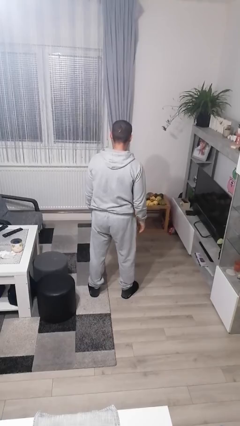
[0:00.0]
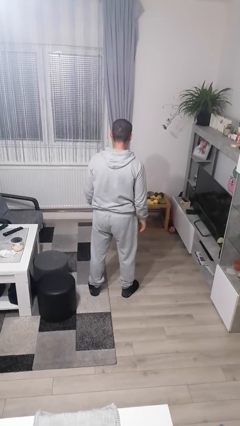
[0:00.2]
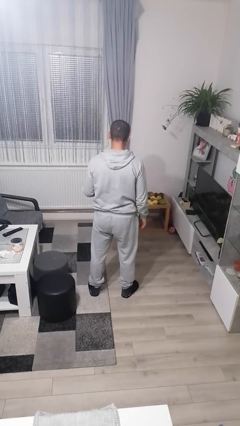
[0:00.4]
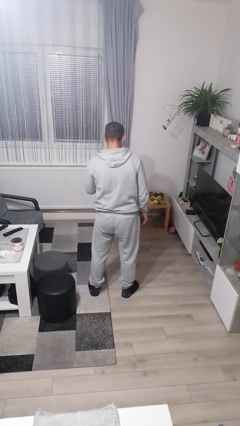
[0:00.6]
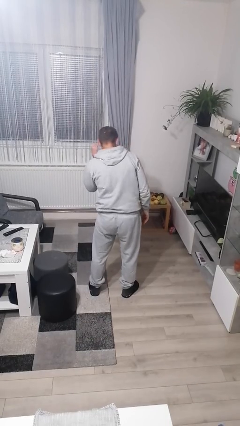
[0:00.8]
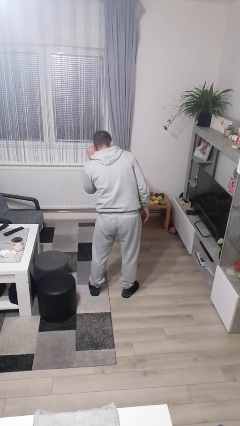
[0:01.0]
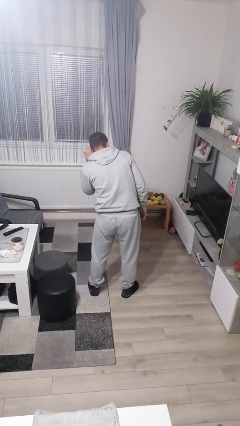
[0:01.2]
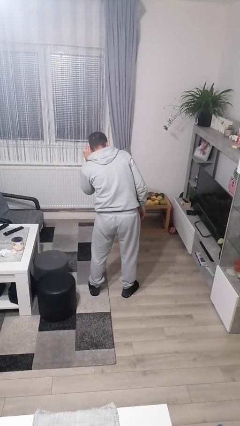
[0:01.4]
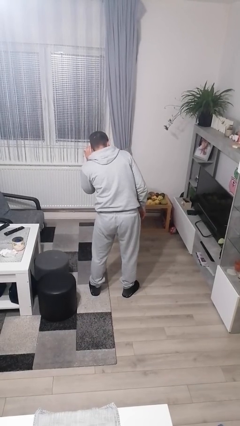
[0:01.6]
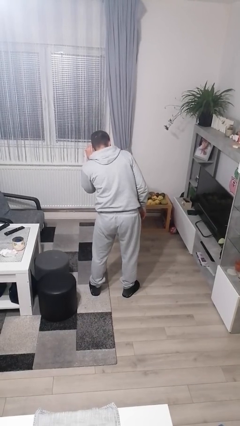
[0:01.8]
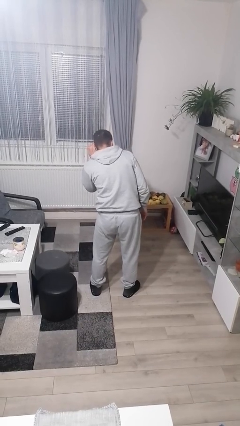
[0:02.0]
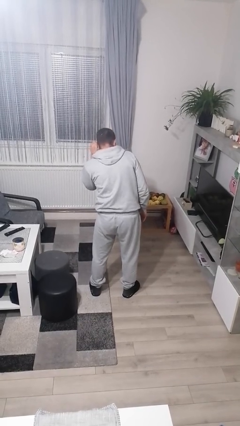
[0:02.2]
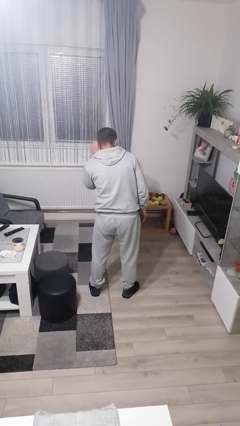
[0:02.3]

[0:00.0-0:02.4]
person gestures listen closely

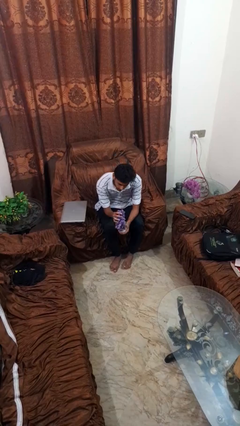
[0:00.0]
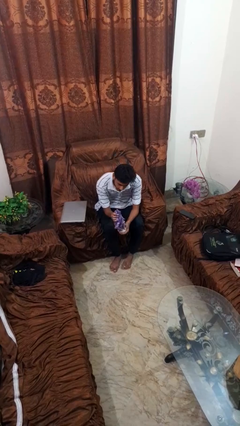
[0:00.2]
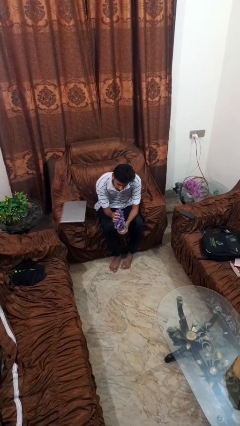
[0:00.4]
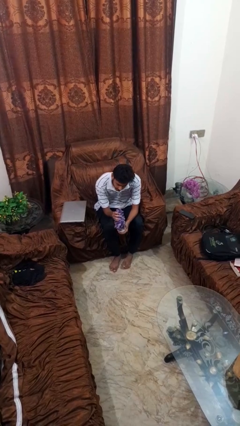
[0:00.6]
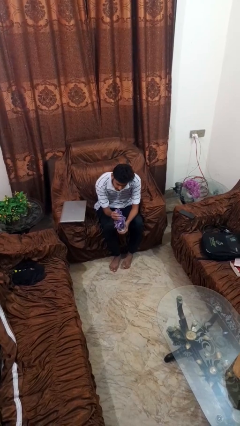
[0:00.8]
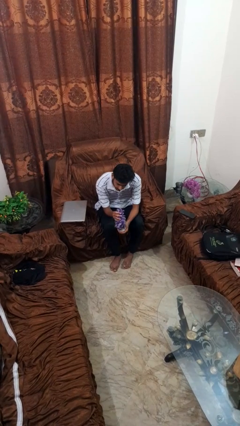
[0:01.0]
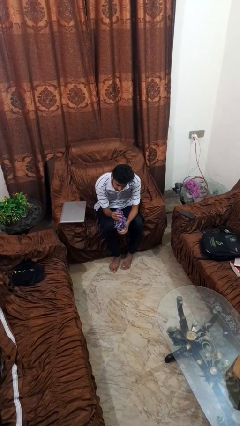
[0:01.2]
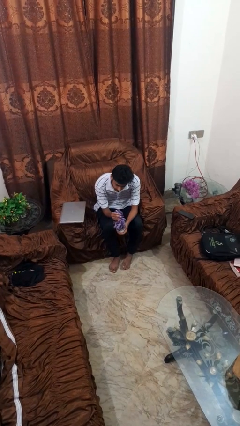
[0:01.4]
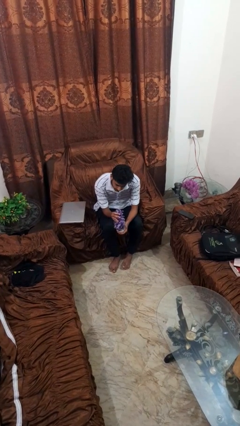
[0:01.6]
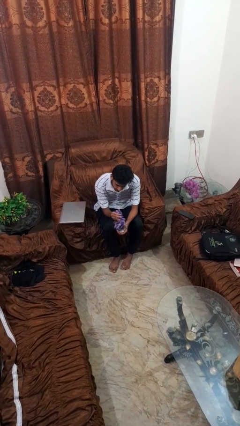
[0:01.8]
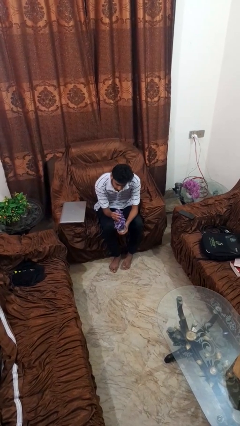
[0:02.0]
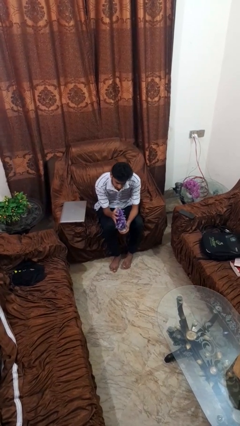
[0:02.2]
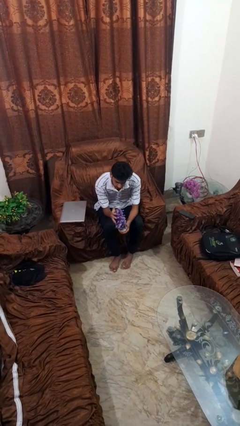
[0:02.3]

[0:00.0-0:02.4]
person squeezes object

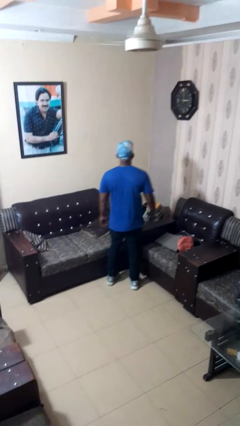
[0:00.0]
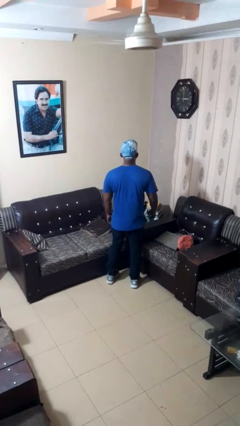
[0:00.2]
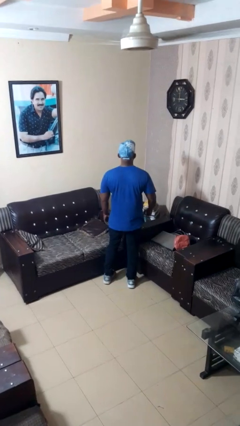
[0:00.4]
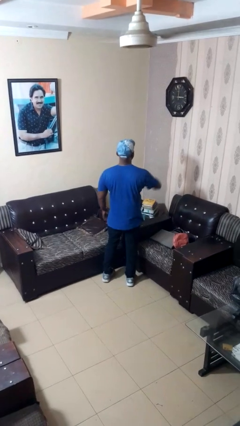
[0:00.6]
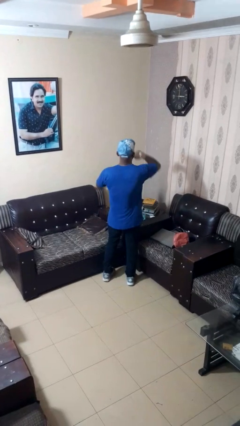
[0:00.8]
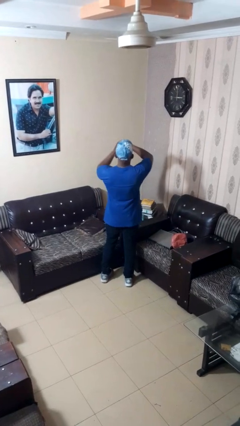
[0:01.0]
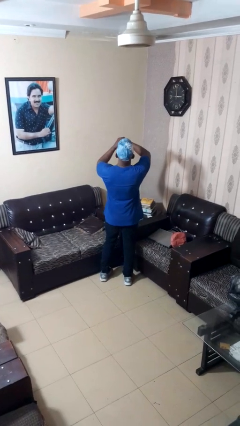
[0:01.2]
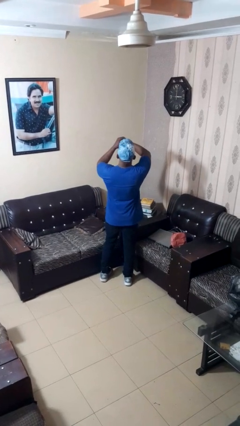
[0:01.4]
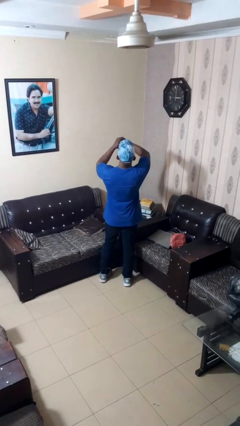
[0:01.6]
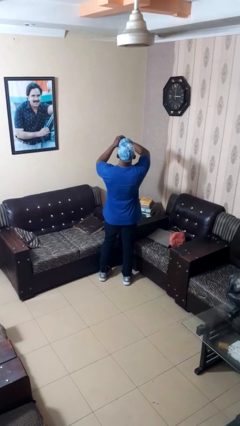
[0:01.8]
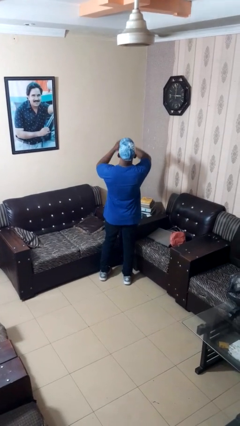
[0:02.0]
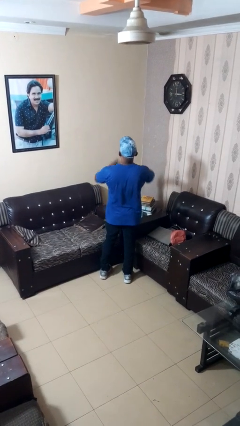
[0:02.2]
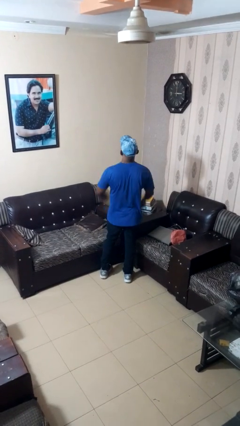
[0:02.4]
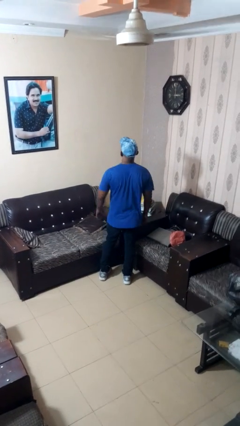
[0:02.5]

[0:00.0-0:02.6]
person looks at wristwatch

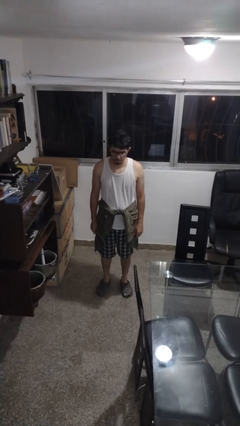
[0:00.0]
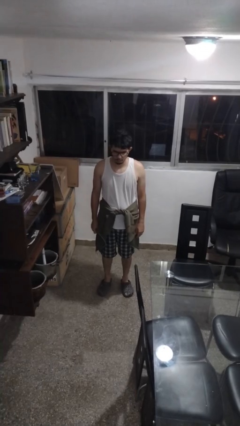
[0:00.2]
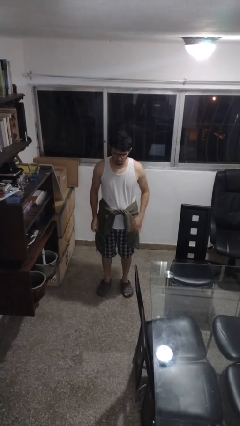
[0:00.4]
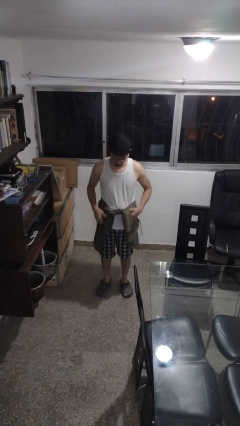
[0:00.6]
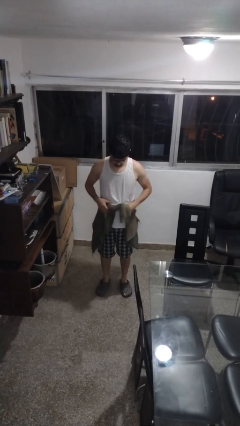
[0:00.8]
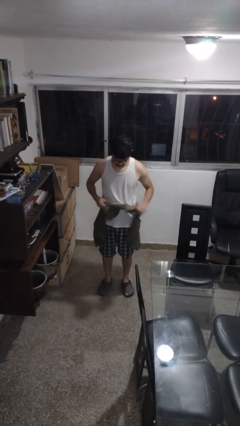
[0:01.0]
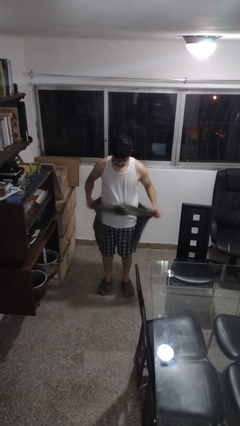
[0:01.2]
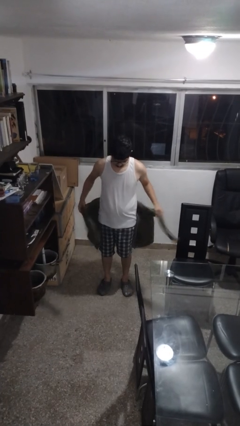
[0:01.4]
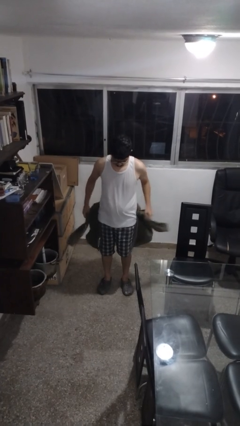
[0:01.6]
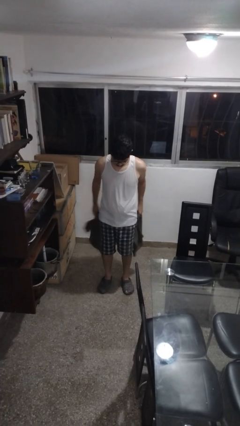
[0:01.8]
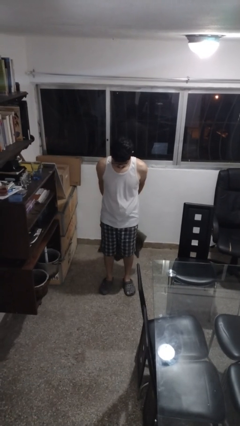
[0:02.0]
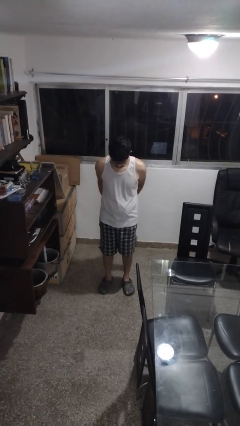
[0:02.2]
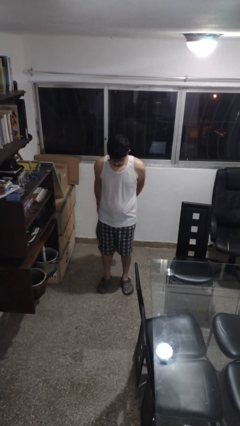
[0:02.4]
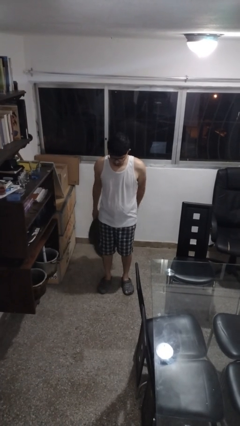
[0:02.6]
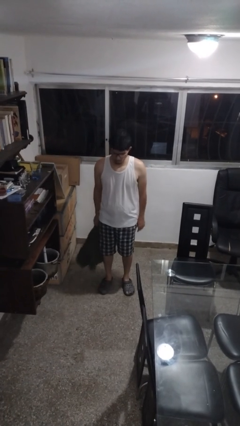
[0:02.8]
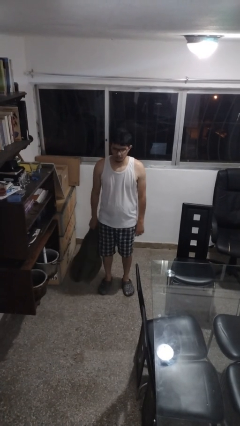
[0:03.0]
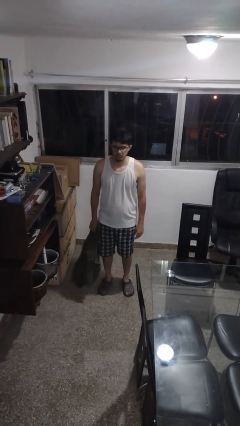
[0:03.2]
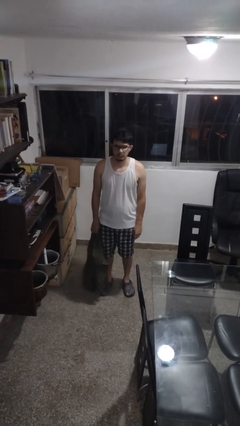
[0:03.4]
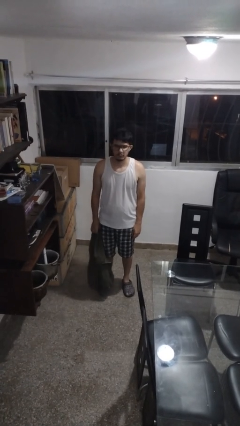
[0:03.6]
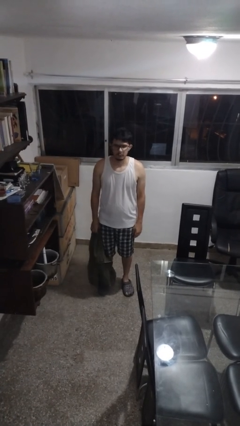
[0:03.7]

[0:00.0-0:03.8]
person unties jacket around waist

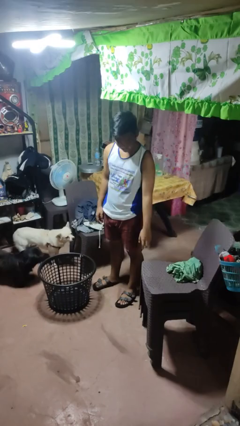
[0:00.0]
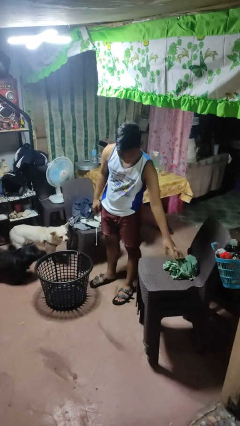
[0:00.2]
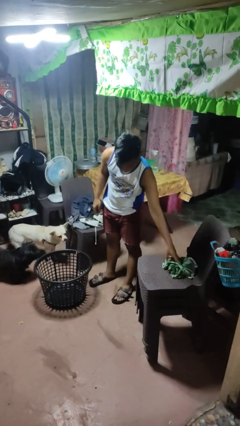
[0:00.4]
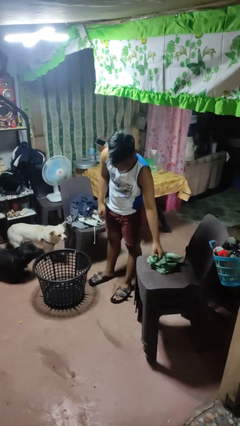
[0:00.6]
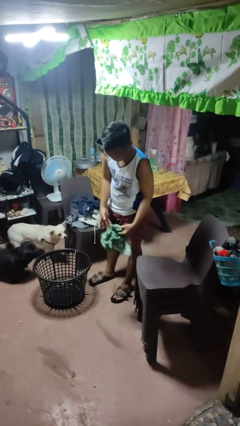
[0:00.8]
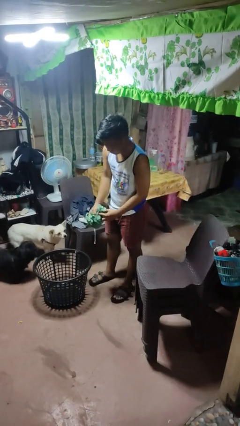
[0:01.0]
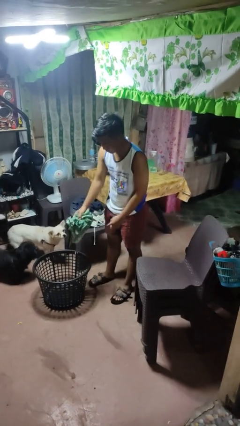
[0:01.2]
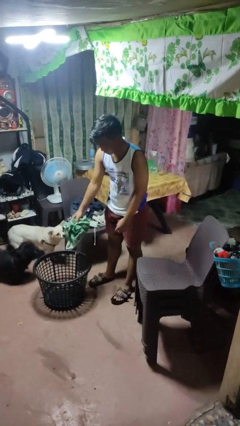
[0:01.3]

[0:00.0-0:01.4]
person puts object into basket

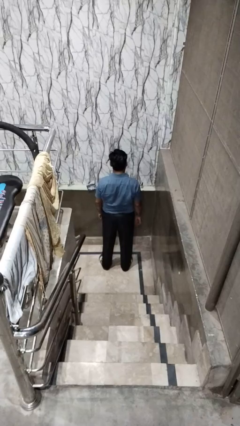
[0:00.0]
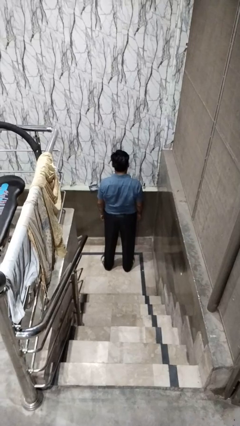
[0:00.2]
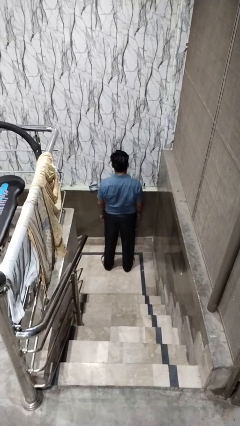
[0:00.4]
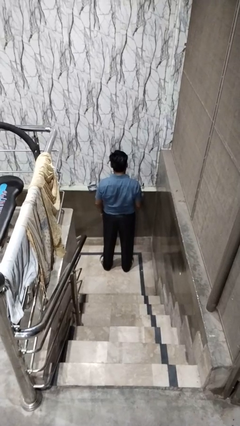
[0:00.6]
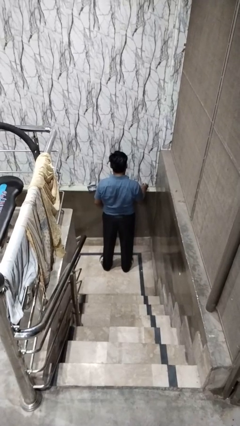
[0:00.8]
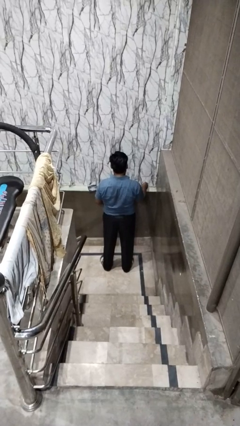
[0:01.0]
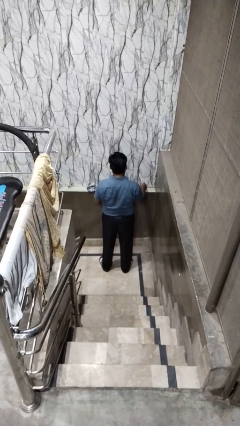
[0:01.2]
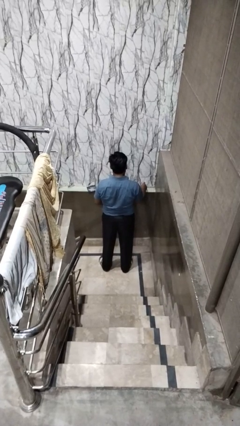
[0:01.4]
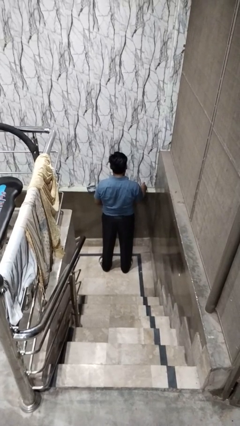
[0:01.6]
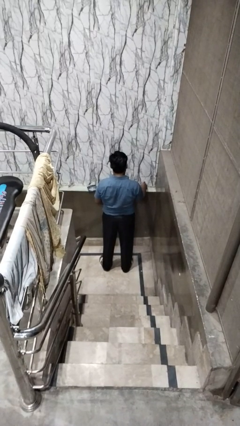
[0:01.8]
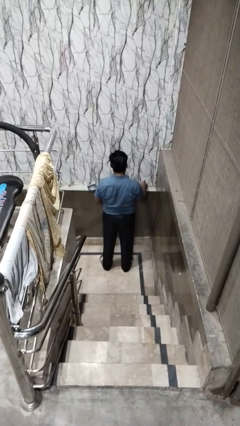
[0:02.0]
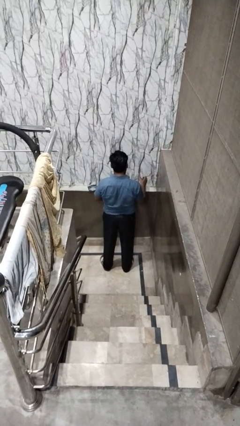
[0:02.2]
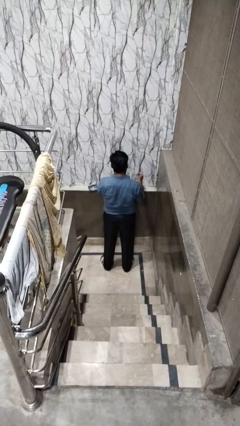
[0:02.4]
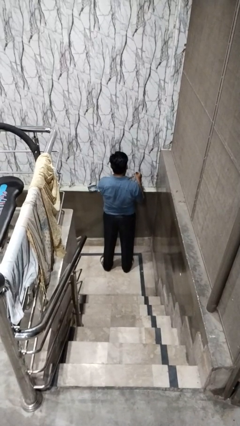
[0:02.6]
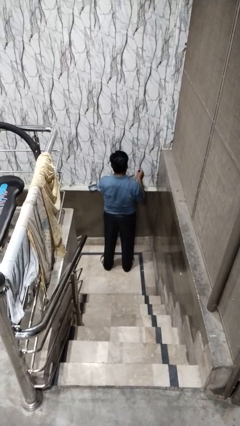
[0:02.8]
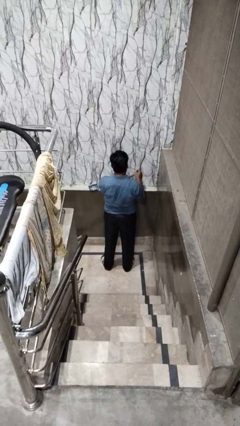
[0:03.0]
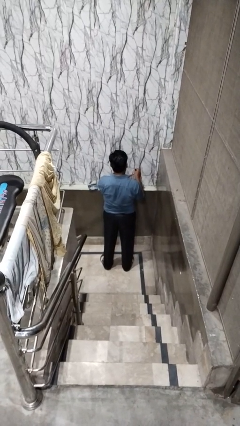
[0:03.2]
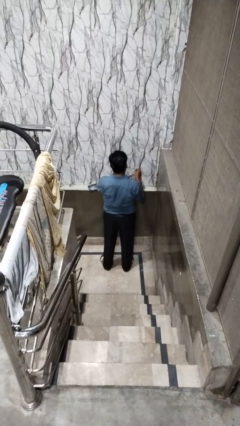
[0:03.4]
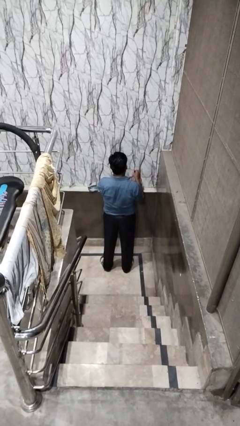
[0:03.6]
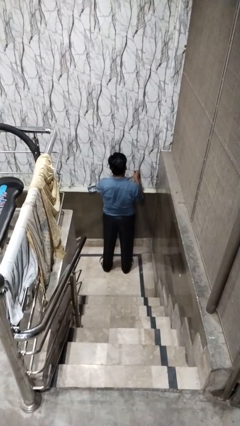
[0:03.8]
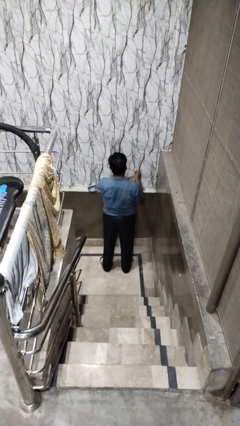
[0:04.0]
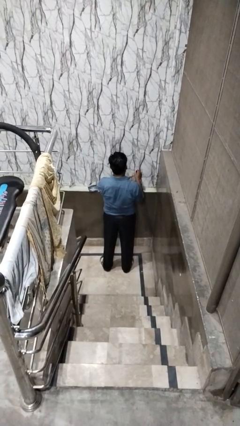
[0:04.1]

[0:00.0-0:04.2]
person paints fingernails

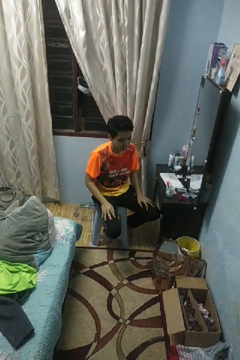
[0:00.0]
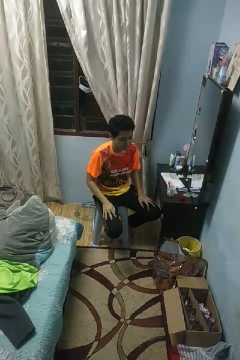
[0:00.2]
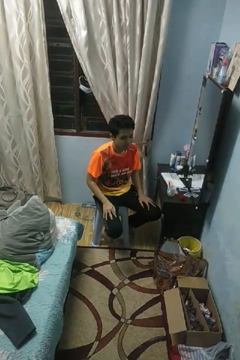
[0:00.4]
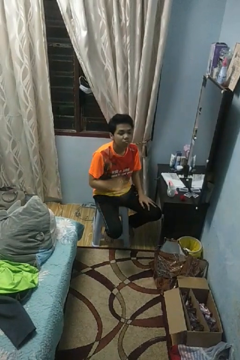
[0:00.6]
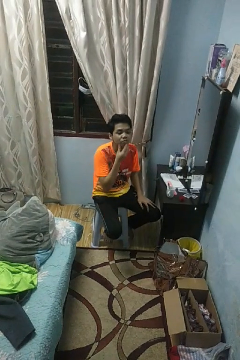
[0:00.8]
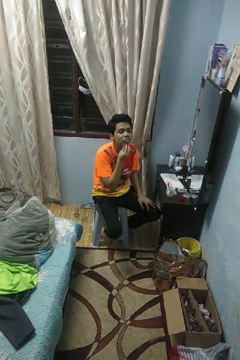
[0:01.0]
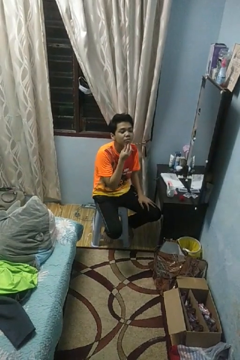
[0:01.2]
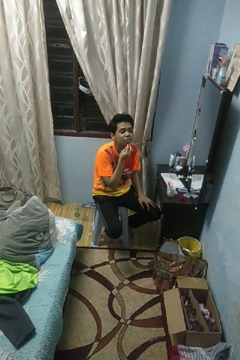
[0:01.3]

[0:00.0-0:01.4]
person strokes chin
